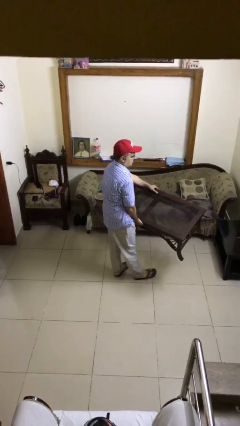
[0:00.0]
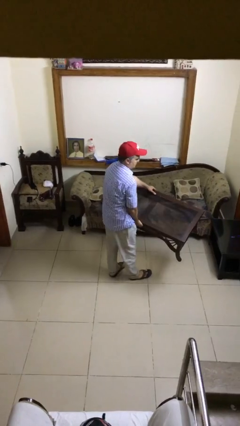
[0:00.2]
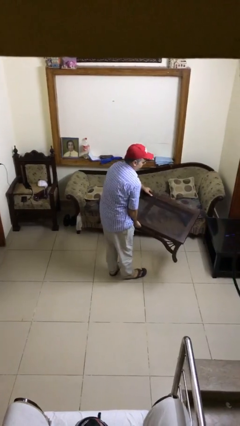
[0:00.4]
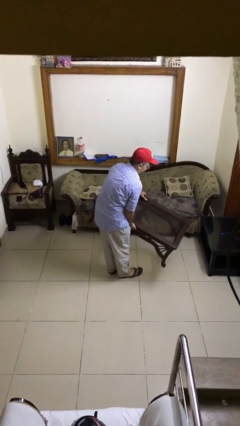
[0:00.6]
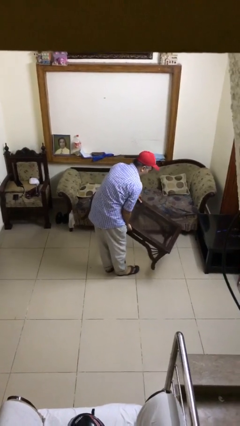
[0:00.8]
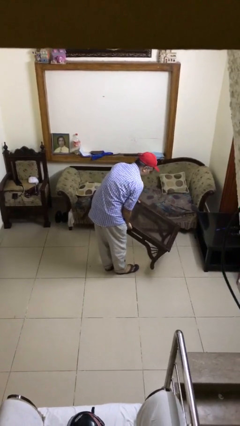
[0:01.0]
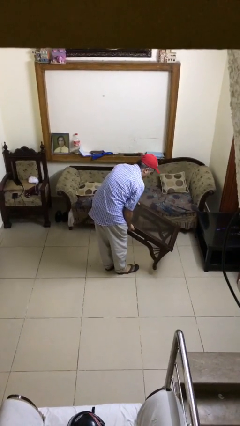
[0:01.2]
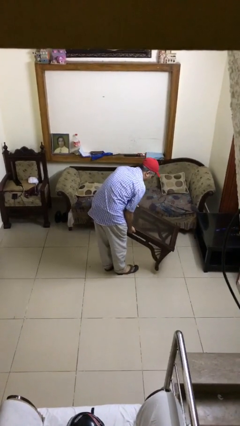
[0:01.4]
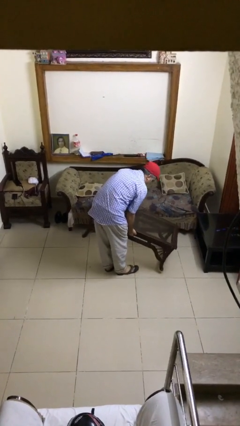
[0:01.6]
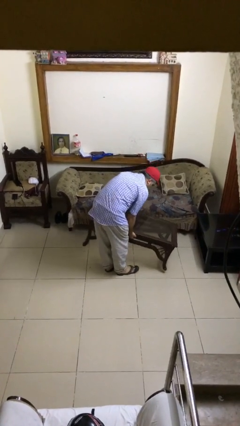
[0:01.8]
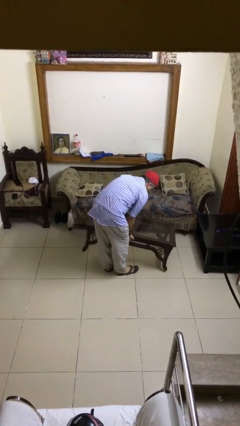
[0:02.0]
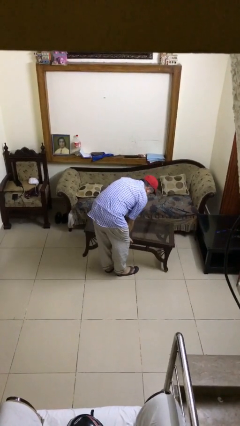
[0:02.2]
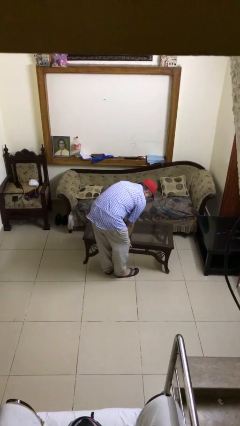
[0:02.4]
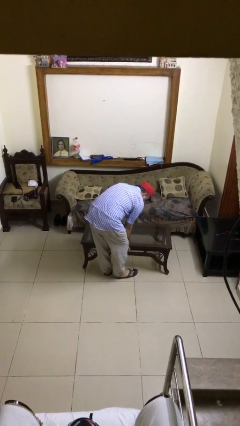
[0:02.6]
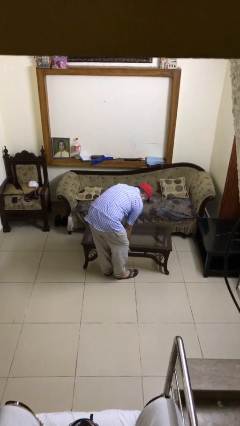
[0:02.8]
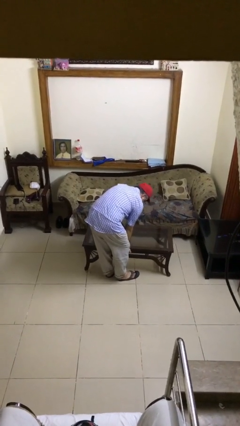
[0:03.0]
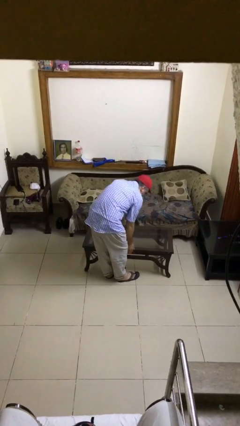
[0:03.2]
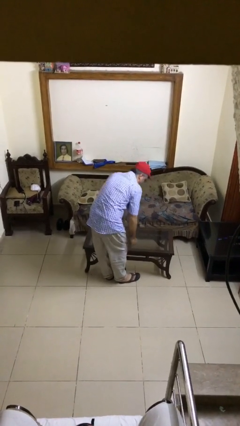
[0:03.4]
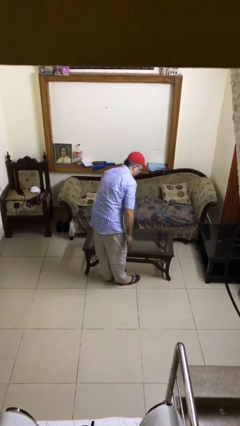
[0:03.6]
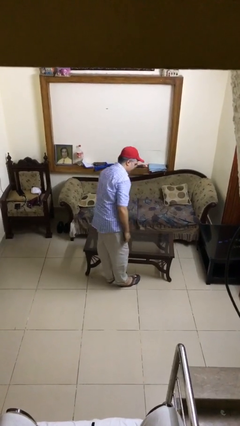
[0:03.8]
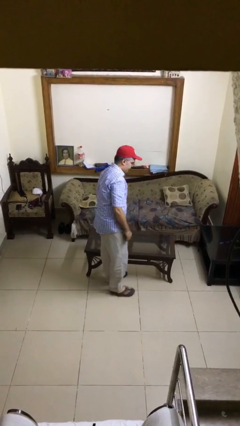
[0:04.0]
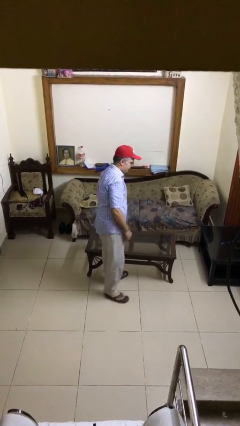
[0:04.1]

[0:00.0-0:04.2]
person puts down object on floor

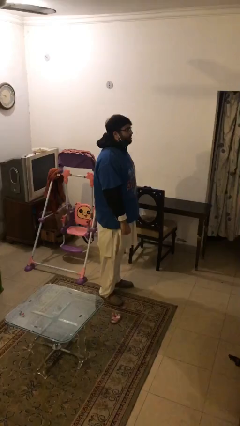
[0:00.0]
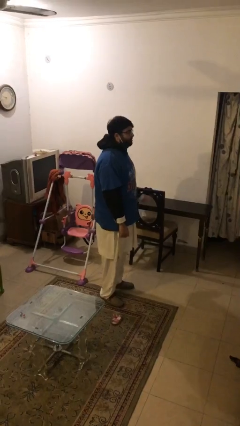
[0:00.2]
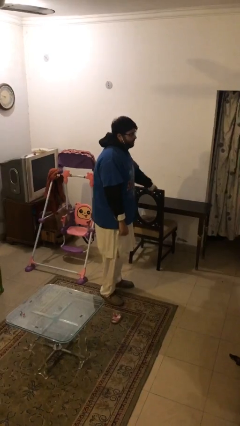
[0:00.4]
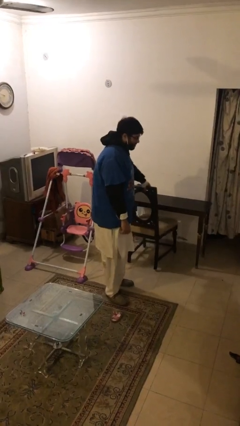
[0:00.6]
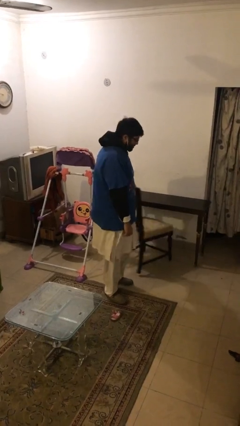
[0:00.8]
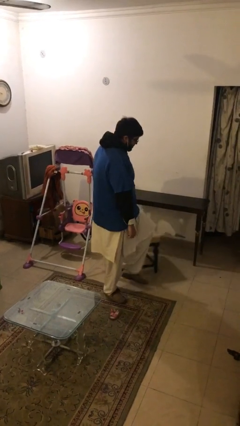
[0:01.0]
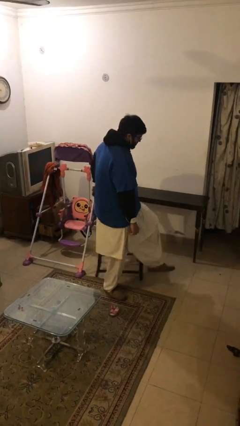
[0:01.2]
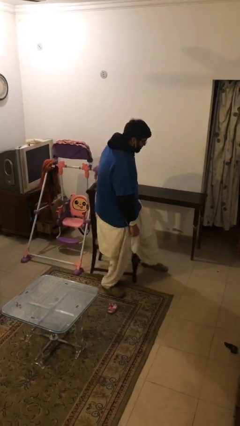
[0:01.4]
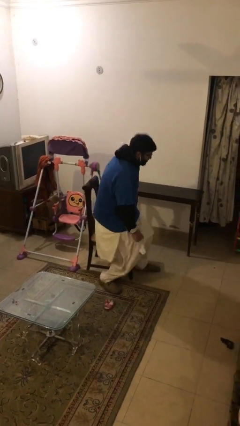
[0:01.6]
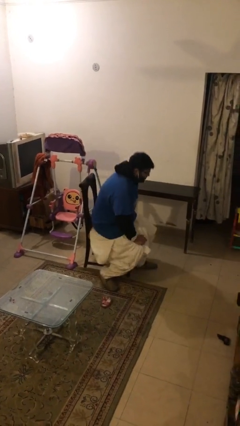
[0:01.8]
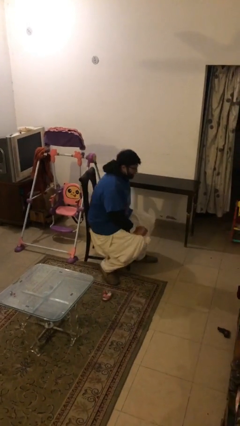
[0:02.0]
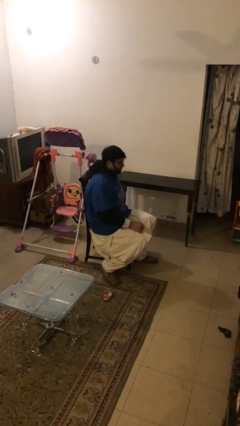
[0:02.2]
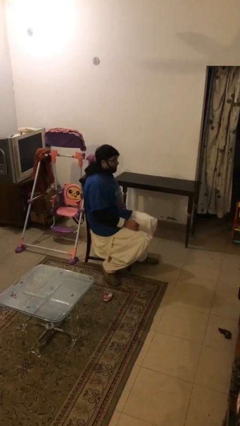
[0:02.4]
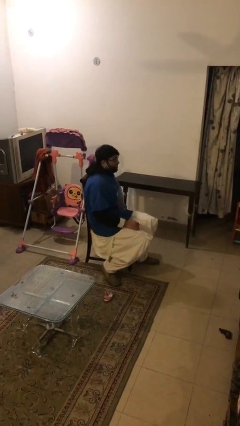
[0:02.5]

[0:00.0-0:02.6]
person sits down

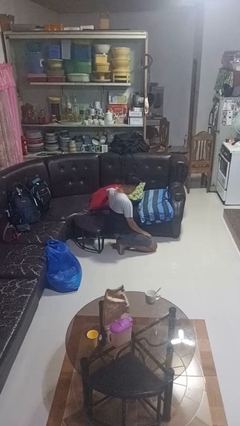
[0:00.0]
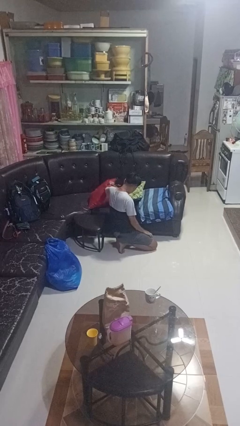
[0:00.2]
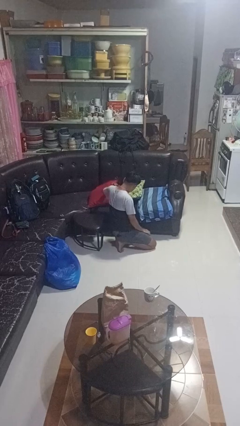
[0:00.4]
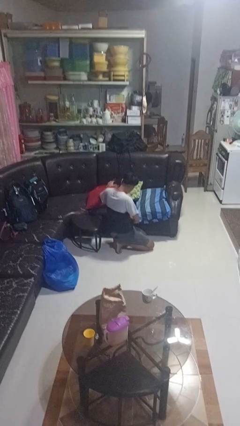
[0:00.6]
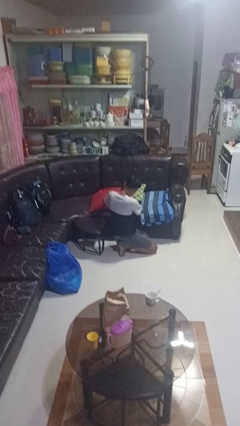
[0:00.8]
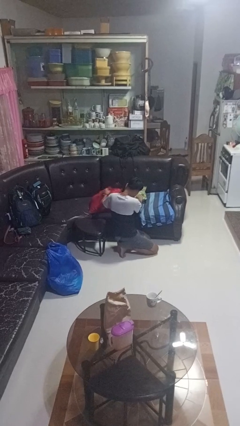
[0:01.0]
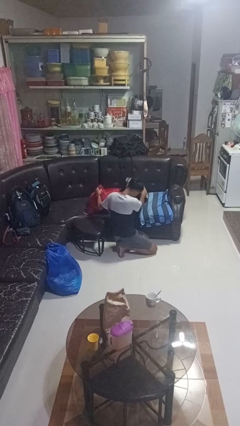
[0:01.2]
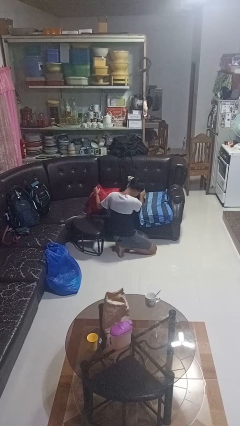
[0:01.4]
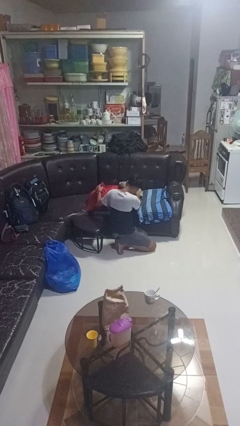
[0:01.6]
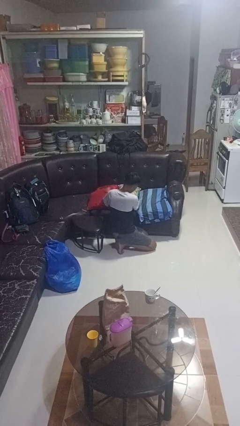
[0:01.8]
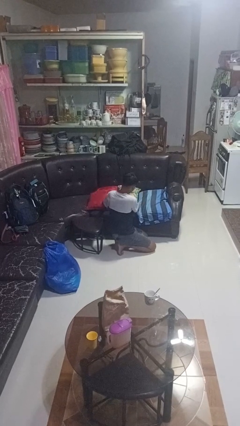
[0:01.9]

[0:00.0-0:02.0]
person searches in couch

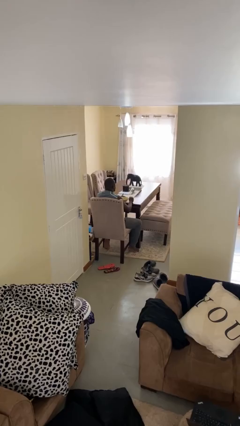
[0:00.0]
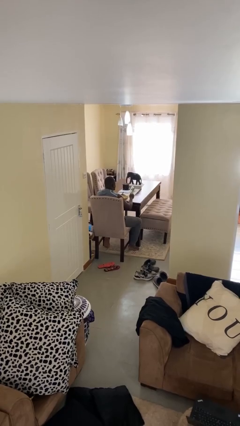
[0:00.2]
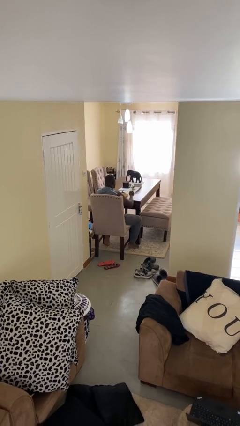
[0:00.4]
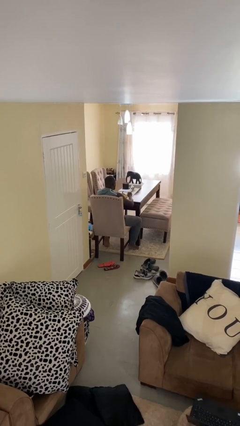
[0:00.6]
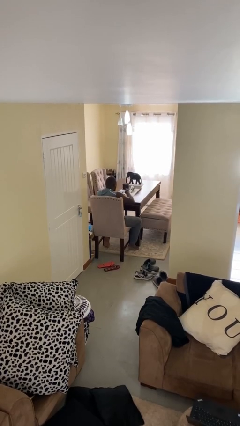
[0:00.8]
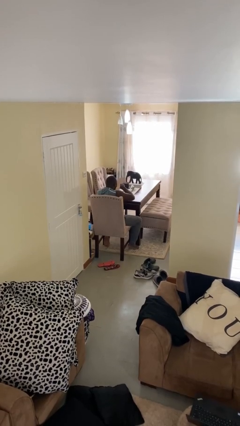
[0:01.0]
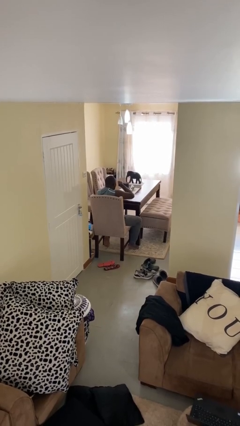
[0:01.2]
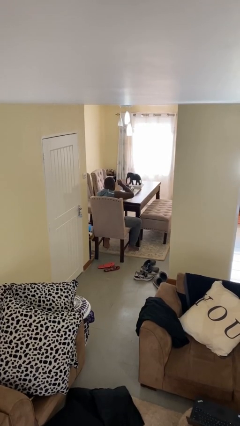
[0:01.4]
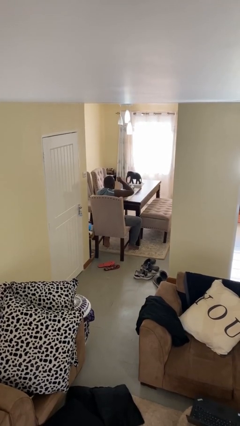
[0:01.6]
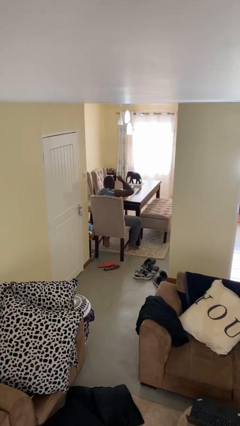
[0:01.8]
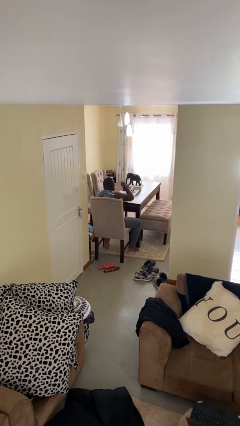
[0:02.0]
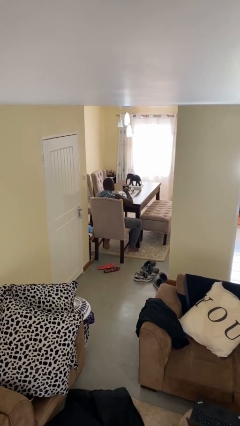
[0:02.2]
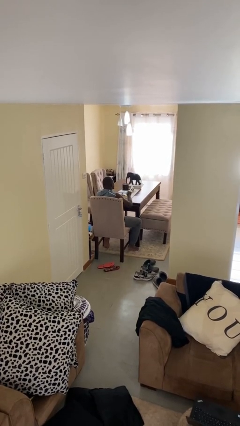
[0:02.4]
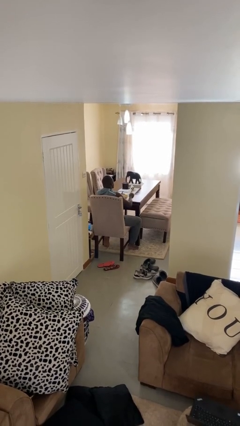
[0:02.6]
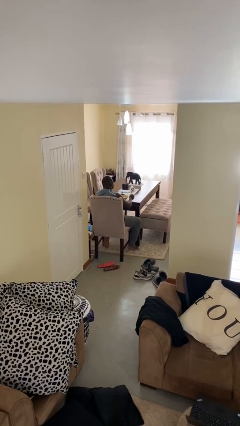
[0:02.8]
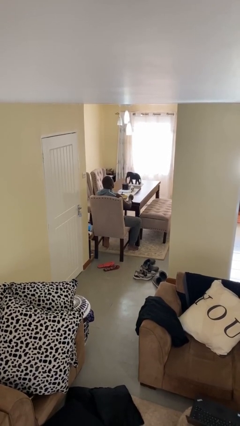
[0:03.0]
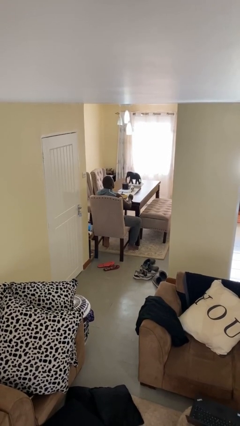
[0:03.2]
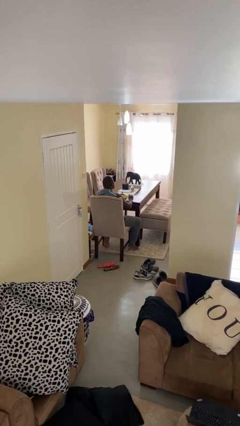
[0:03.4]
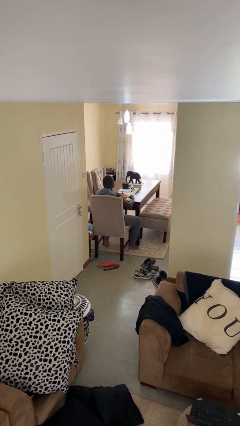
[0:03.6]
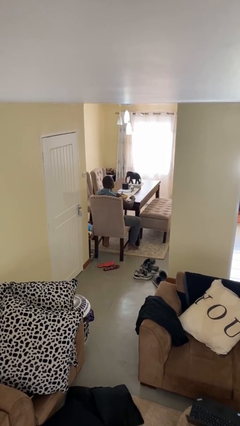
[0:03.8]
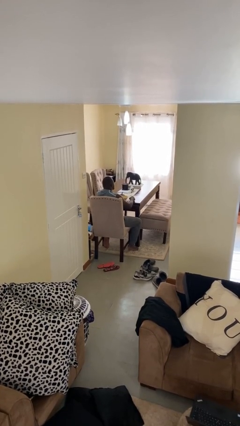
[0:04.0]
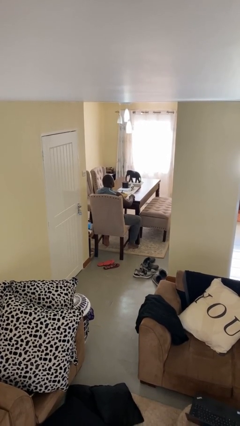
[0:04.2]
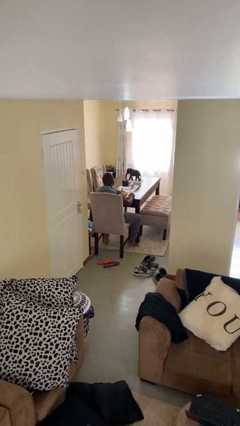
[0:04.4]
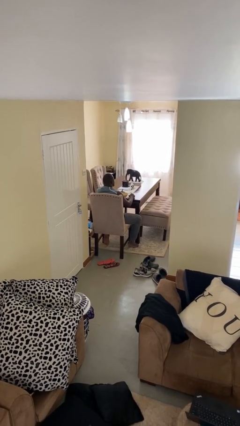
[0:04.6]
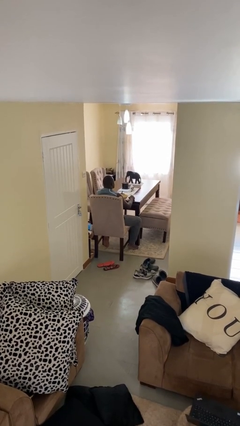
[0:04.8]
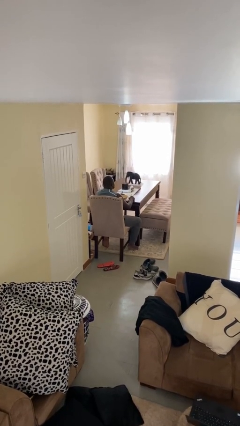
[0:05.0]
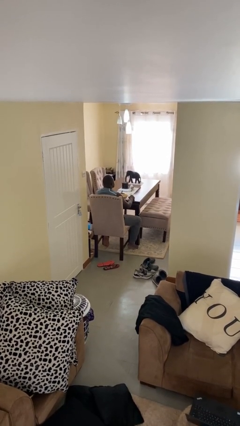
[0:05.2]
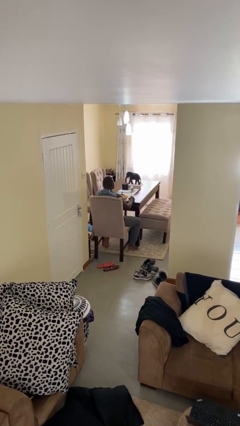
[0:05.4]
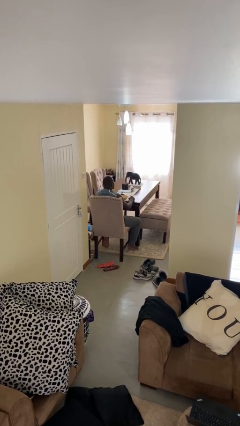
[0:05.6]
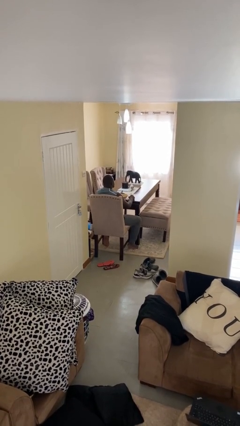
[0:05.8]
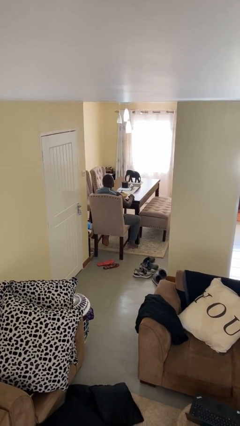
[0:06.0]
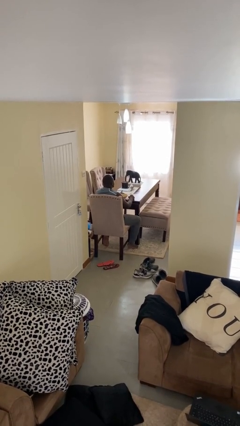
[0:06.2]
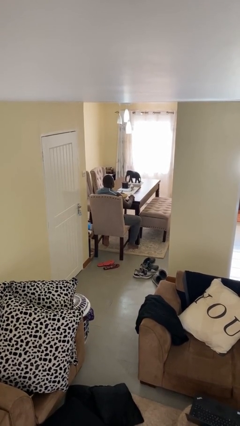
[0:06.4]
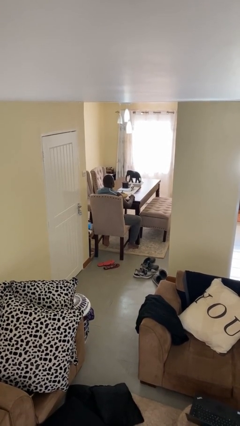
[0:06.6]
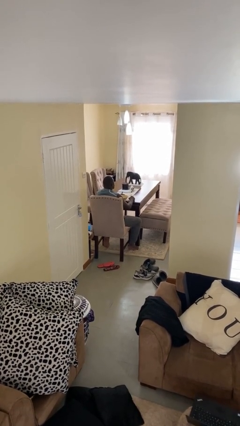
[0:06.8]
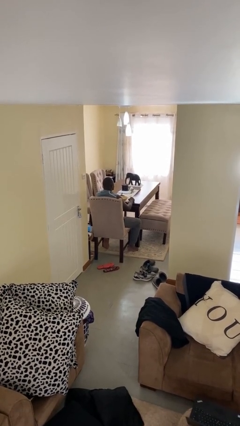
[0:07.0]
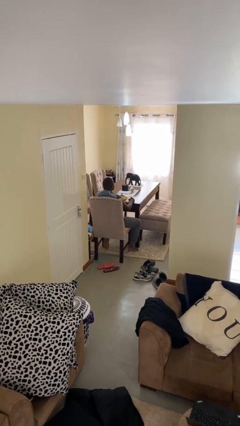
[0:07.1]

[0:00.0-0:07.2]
person eats with utensil

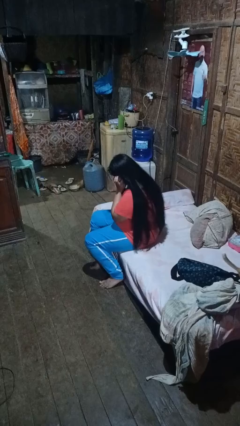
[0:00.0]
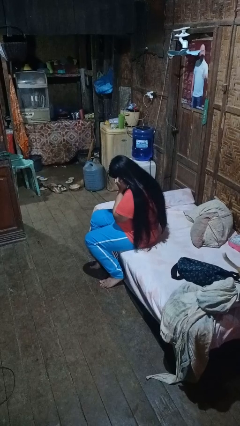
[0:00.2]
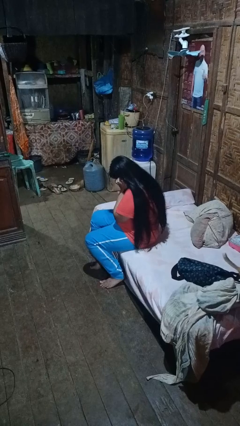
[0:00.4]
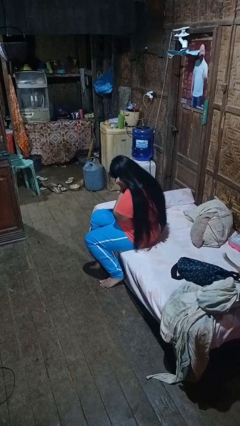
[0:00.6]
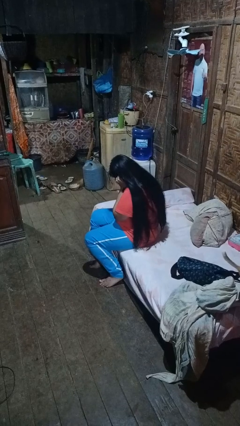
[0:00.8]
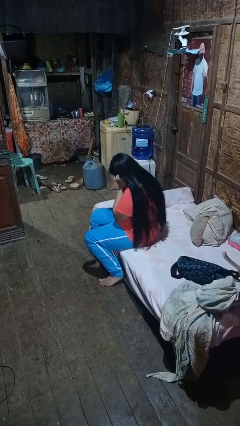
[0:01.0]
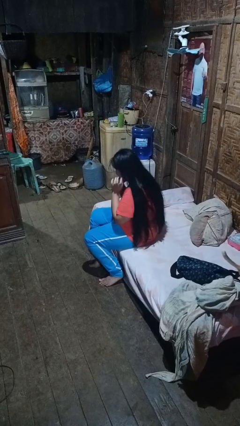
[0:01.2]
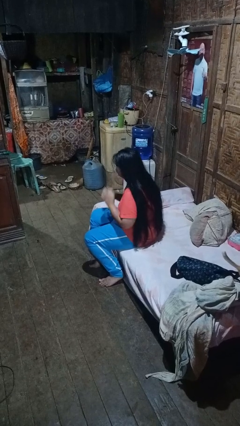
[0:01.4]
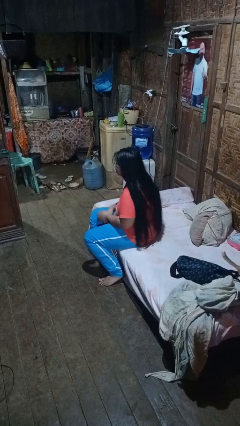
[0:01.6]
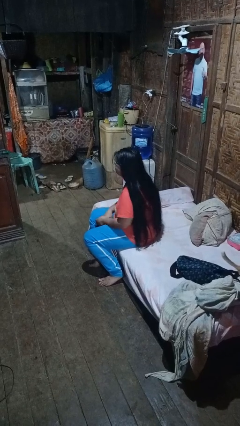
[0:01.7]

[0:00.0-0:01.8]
person puts fingers in ear
